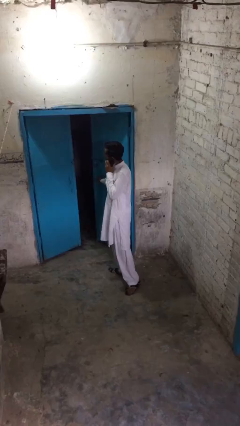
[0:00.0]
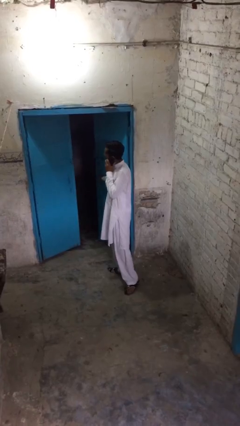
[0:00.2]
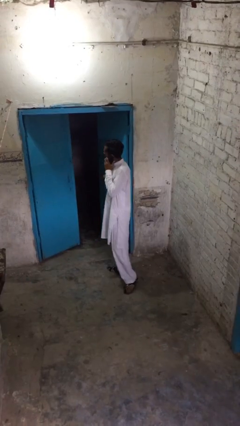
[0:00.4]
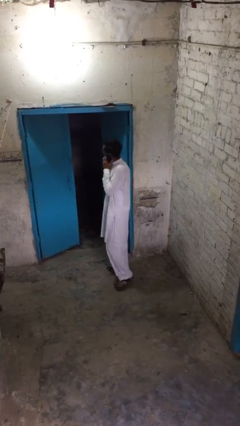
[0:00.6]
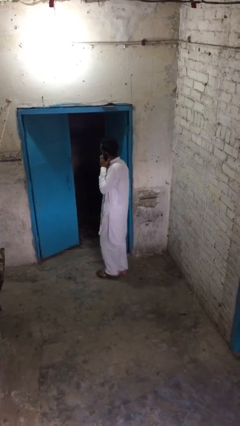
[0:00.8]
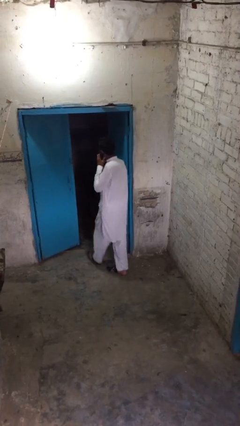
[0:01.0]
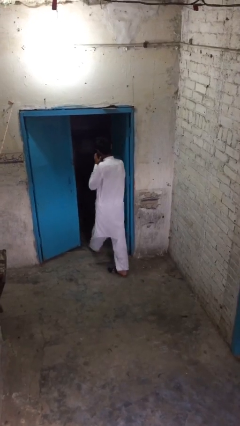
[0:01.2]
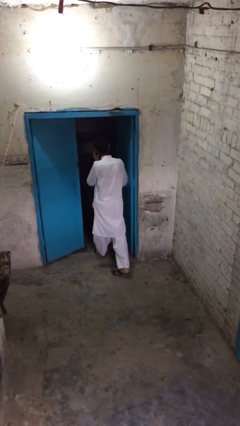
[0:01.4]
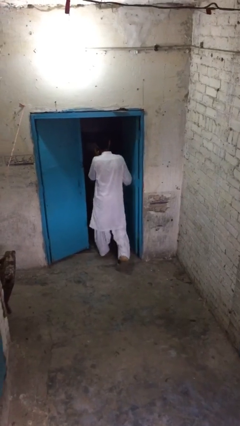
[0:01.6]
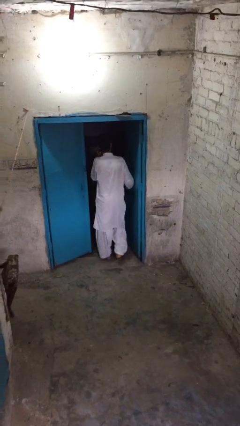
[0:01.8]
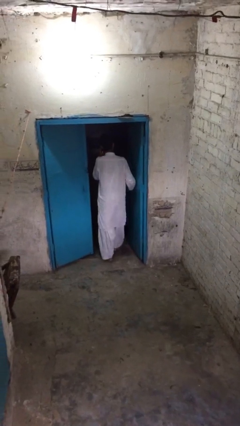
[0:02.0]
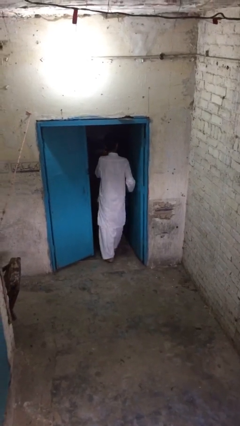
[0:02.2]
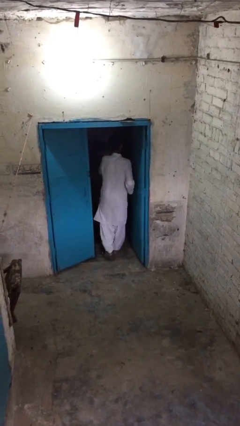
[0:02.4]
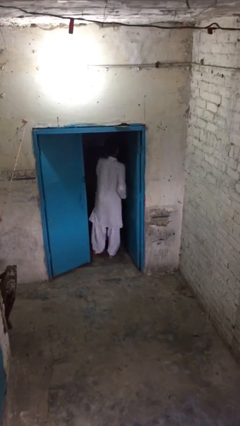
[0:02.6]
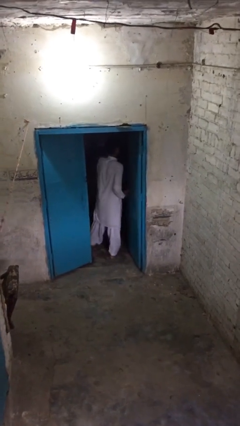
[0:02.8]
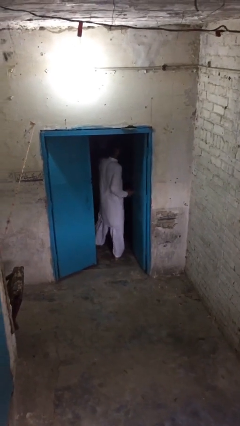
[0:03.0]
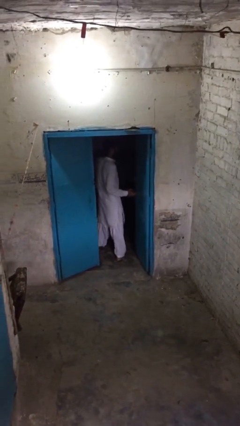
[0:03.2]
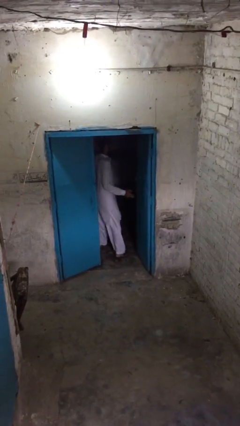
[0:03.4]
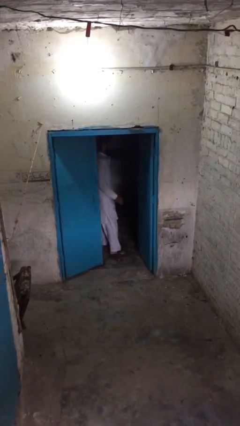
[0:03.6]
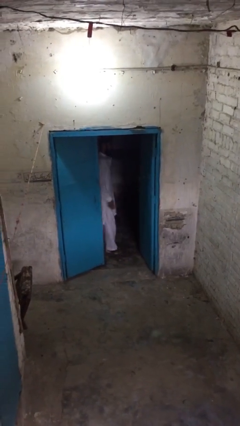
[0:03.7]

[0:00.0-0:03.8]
person exits scene through structure

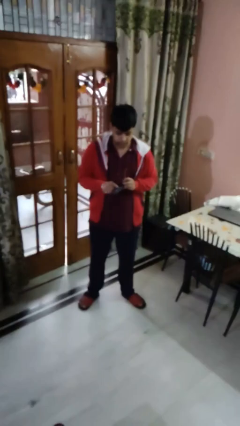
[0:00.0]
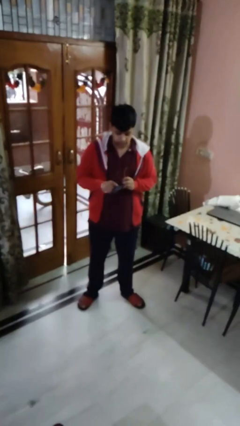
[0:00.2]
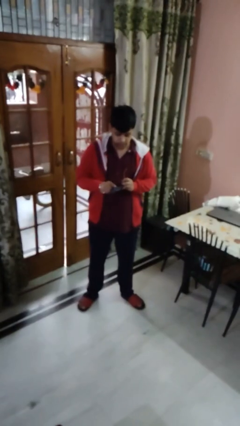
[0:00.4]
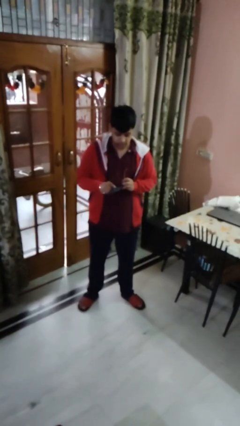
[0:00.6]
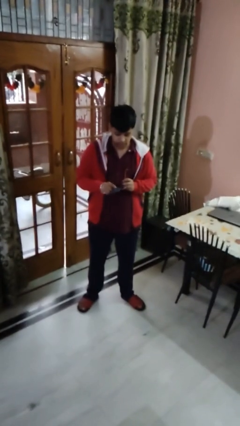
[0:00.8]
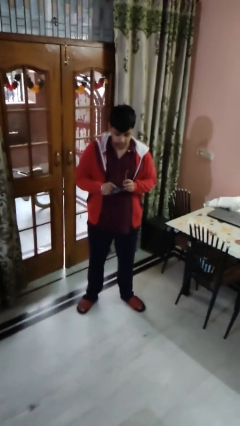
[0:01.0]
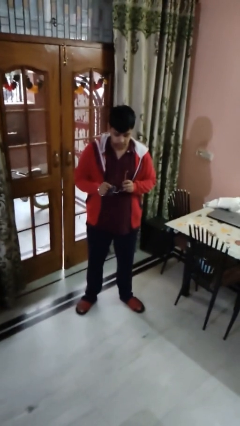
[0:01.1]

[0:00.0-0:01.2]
person cleans eyeglasses

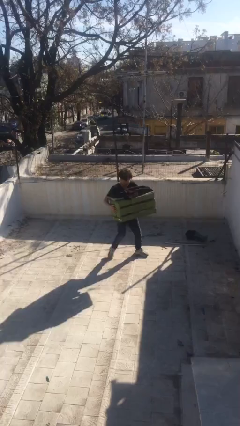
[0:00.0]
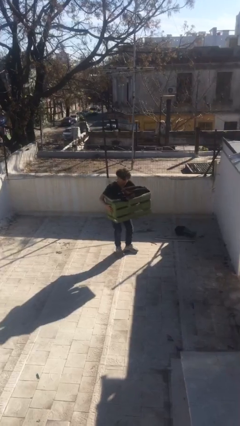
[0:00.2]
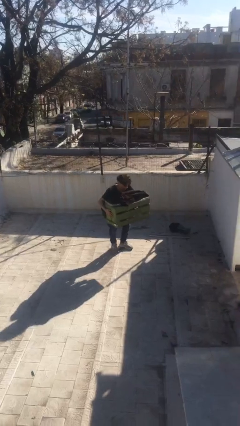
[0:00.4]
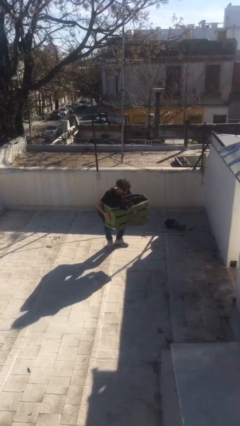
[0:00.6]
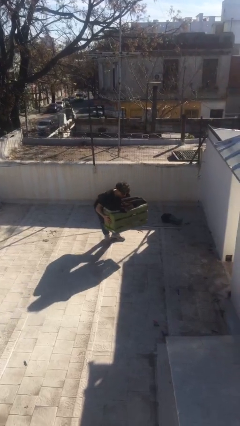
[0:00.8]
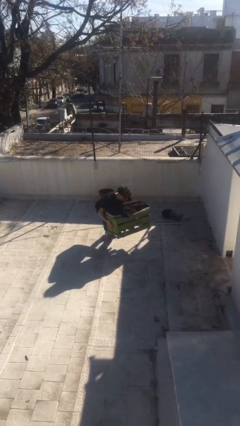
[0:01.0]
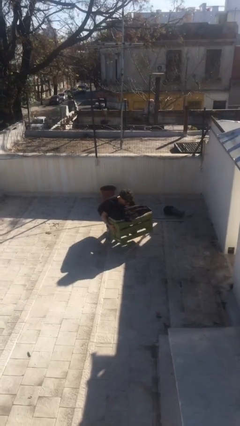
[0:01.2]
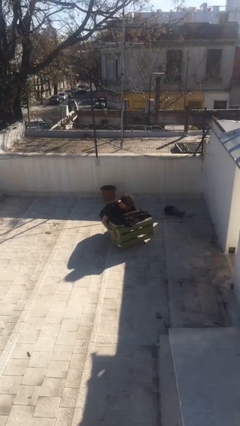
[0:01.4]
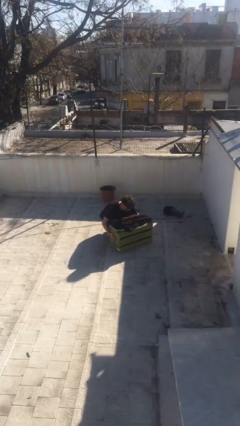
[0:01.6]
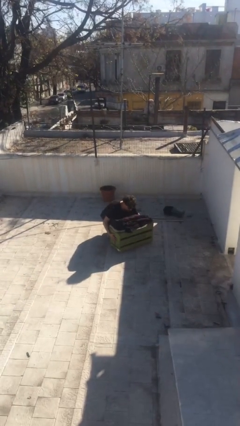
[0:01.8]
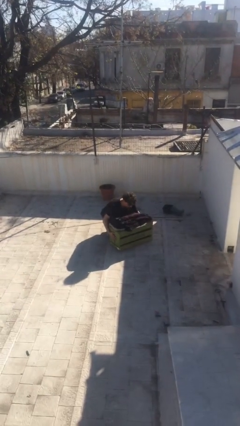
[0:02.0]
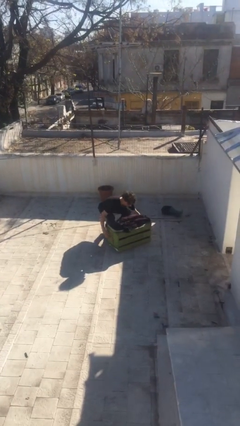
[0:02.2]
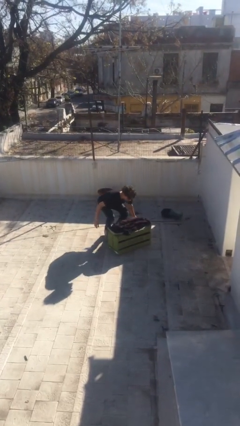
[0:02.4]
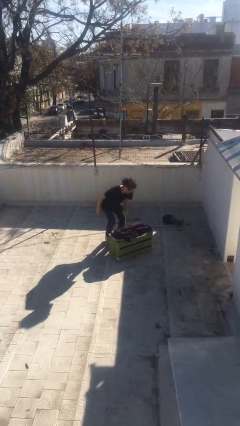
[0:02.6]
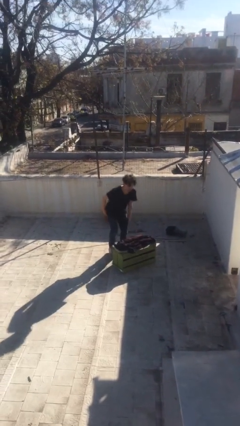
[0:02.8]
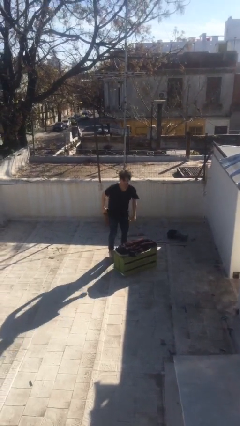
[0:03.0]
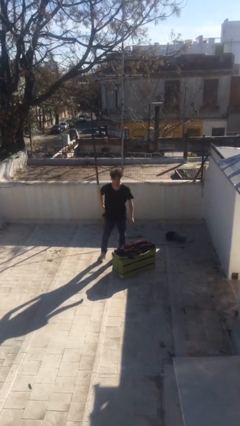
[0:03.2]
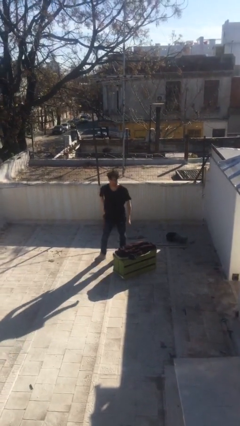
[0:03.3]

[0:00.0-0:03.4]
person puts down object on floor

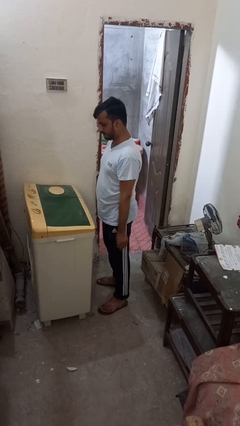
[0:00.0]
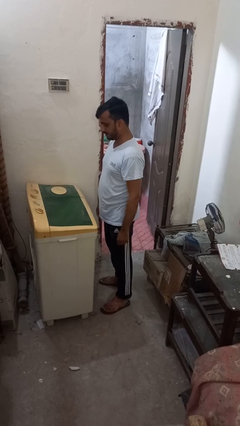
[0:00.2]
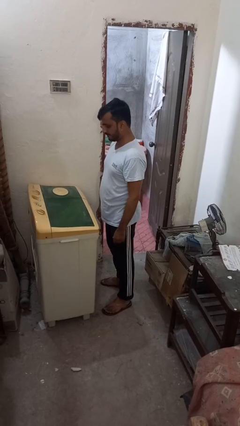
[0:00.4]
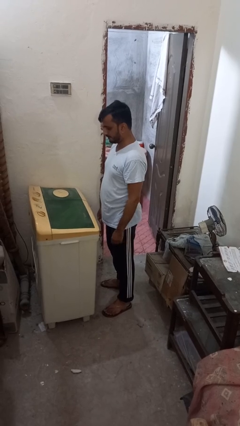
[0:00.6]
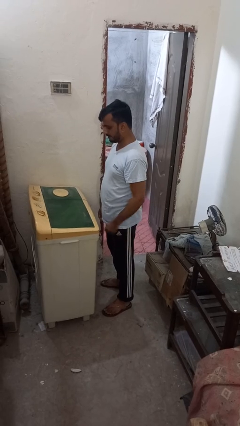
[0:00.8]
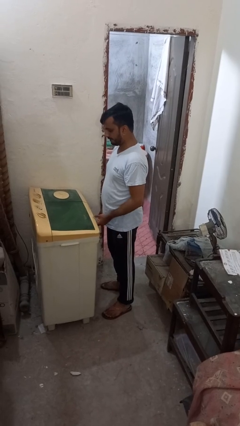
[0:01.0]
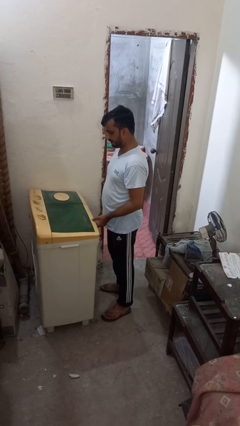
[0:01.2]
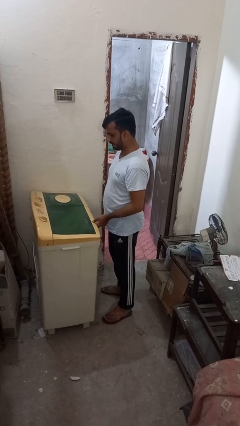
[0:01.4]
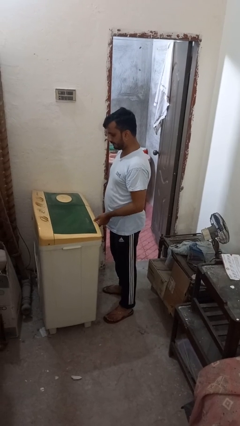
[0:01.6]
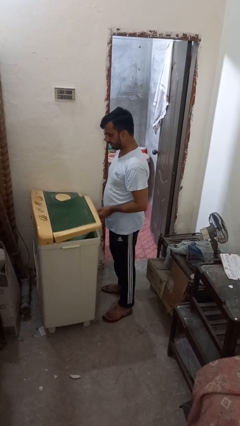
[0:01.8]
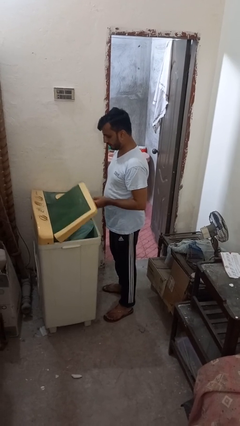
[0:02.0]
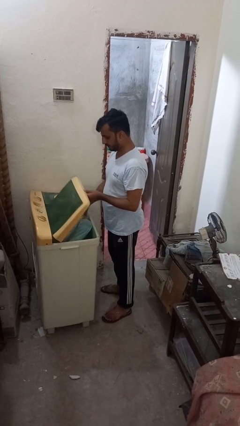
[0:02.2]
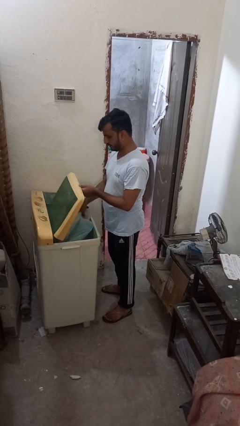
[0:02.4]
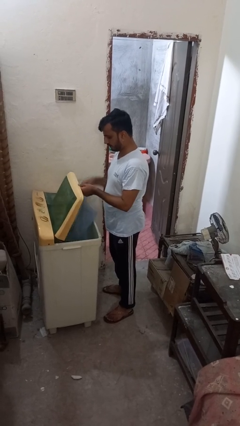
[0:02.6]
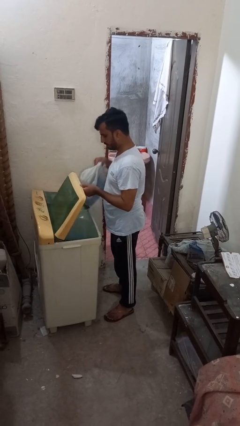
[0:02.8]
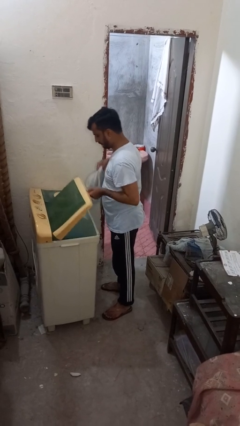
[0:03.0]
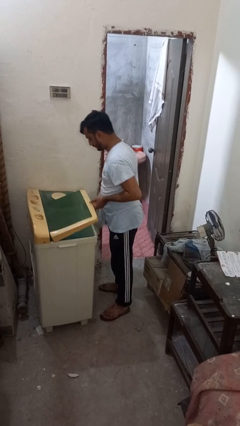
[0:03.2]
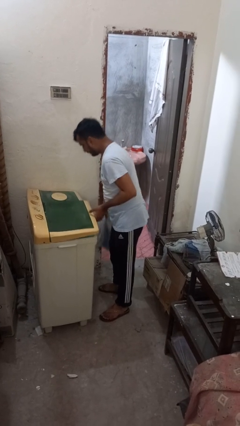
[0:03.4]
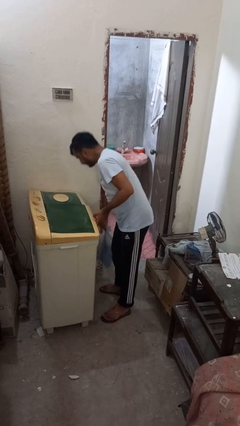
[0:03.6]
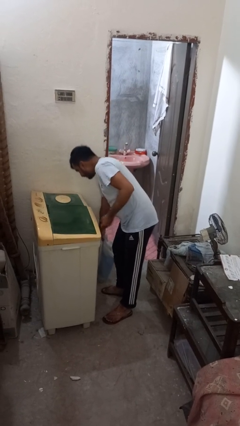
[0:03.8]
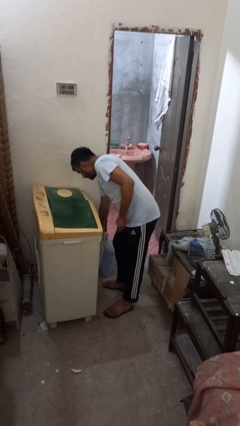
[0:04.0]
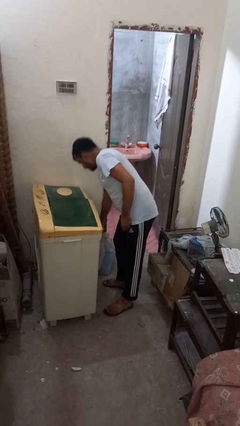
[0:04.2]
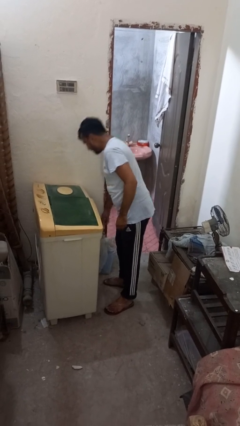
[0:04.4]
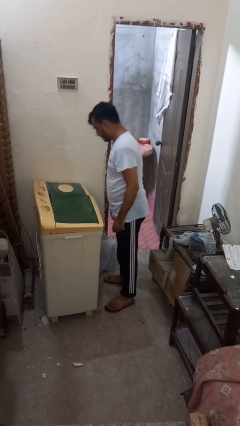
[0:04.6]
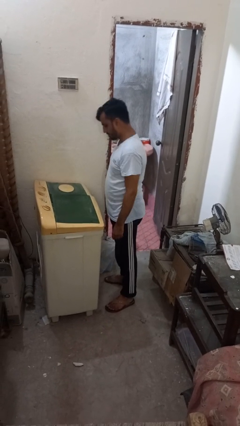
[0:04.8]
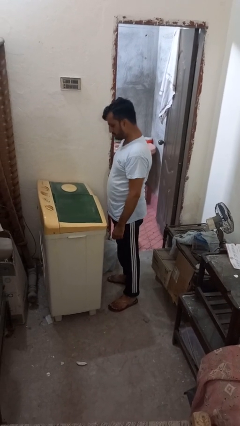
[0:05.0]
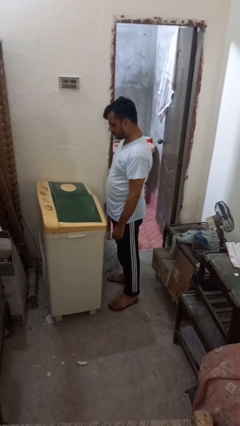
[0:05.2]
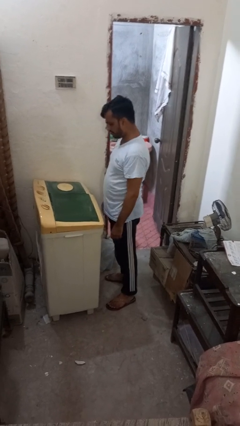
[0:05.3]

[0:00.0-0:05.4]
person unloads clotheswasher

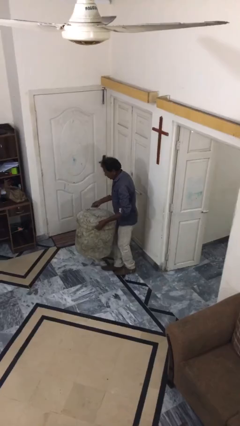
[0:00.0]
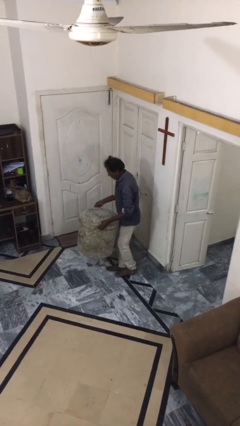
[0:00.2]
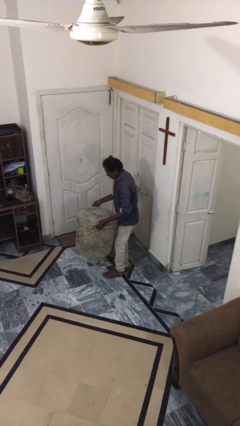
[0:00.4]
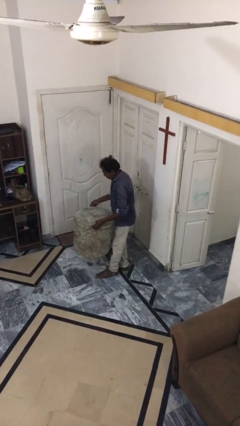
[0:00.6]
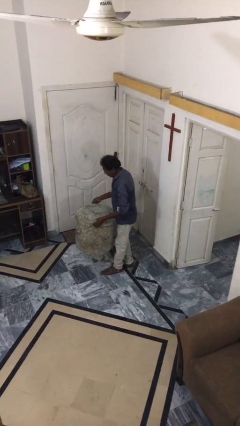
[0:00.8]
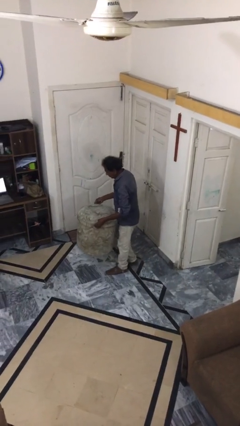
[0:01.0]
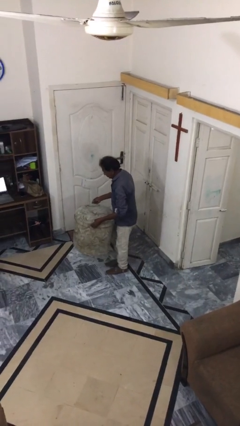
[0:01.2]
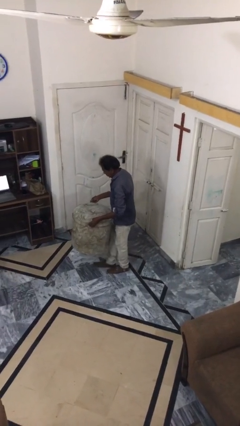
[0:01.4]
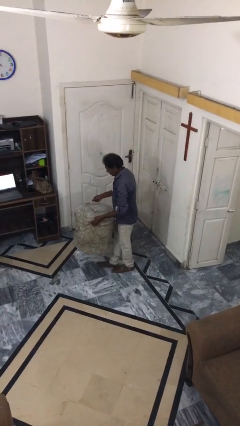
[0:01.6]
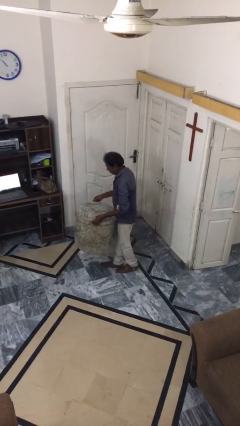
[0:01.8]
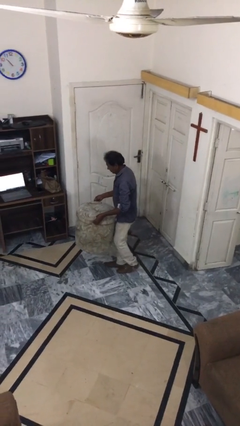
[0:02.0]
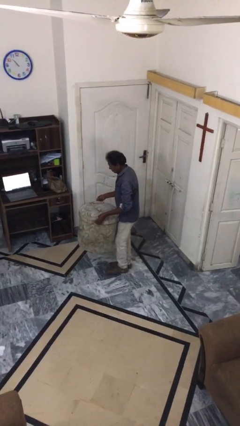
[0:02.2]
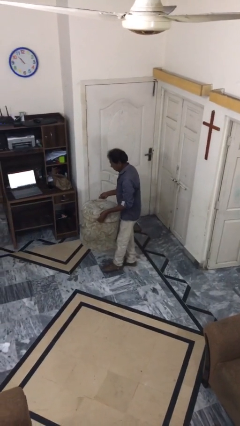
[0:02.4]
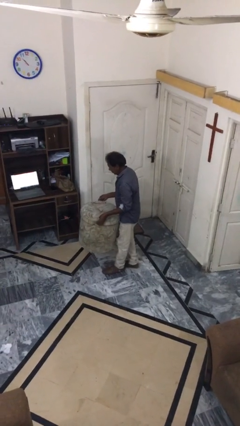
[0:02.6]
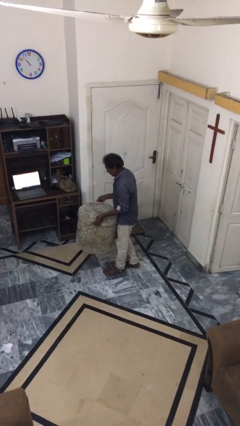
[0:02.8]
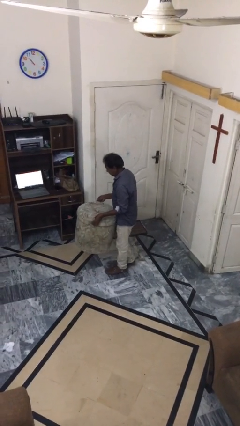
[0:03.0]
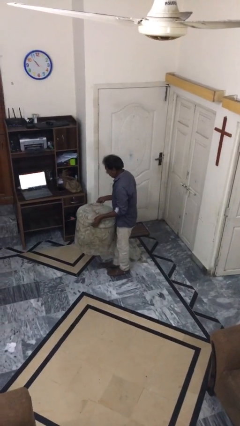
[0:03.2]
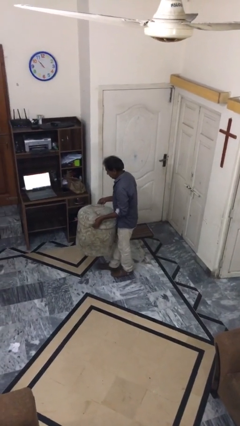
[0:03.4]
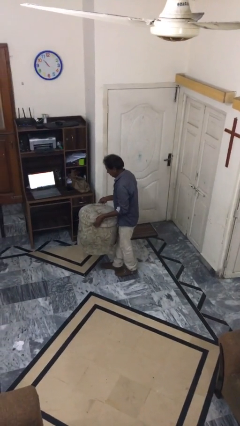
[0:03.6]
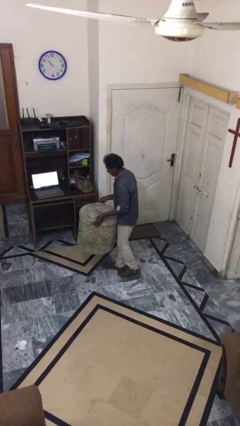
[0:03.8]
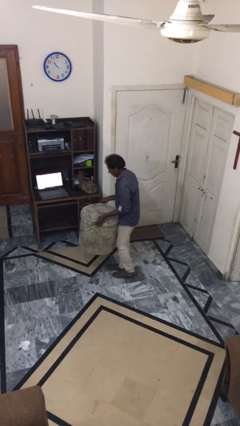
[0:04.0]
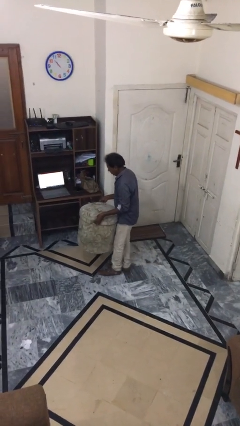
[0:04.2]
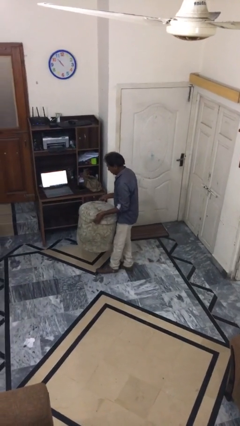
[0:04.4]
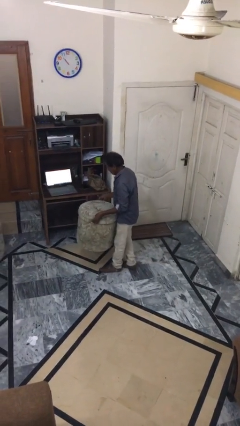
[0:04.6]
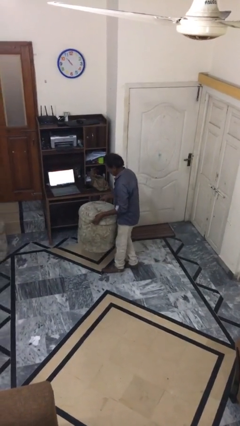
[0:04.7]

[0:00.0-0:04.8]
person carries heavy object
